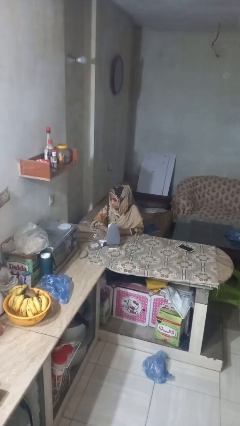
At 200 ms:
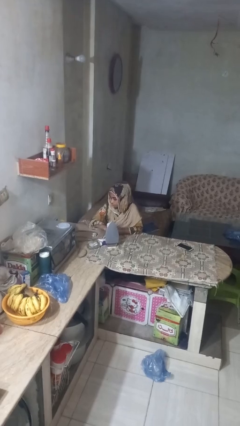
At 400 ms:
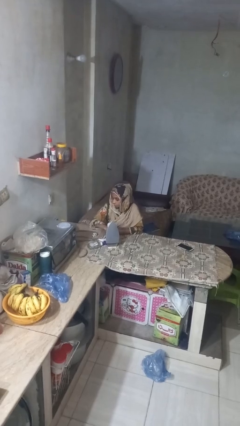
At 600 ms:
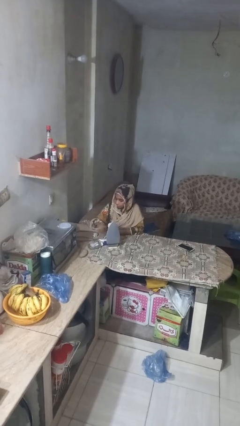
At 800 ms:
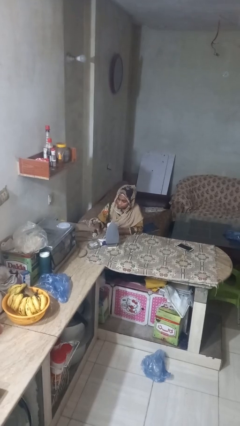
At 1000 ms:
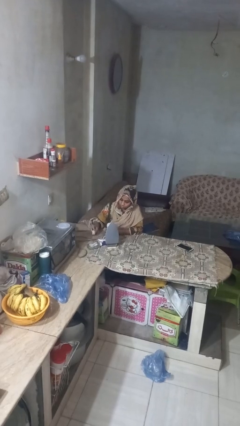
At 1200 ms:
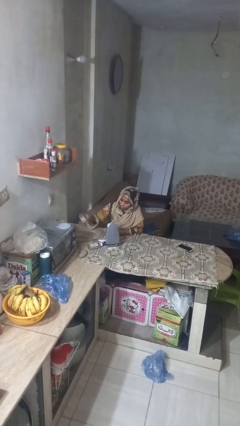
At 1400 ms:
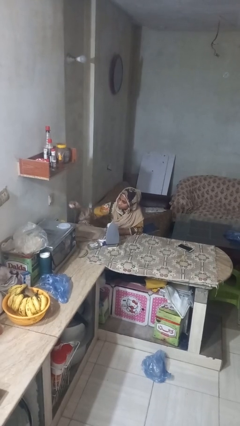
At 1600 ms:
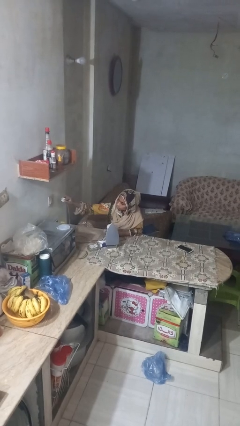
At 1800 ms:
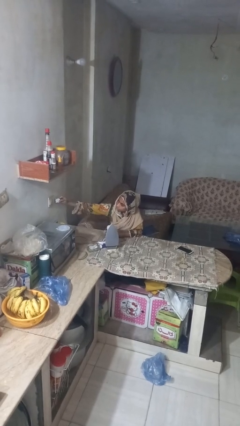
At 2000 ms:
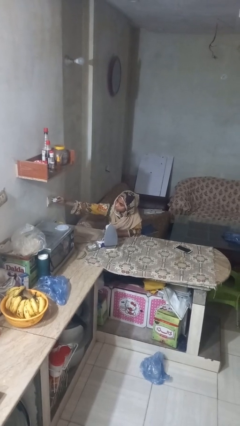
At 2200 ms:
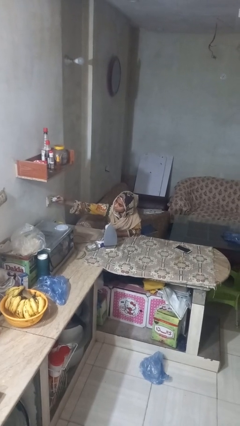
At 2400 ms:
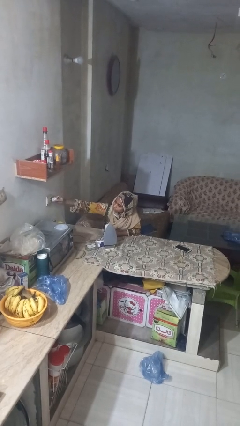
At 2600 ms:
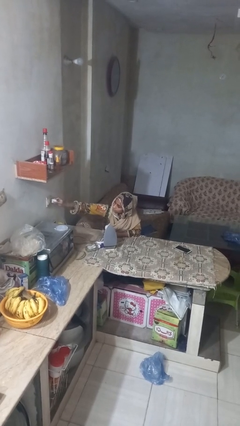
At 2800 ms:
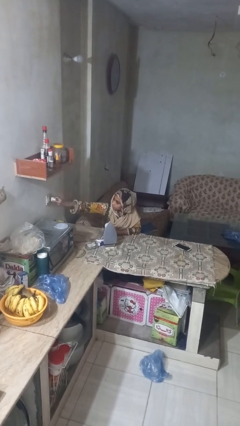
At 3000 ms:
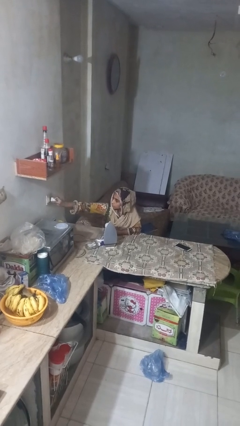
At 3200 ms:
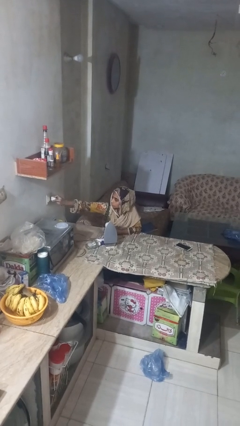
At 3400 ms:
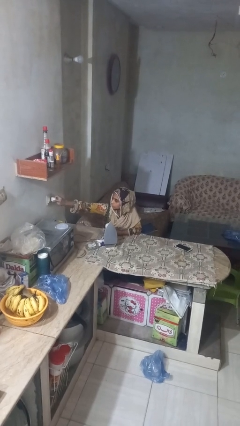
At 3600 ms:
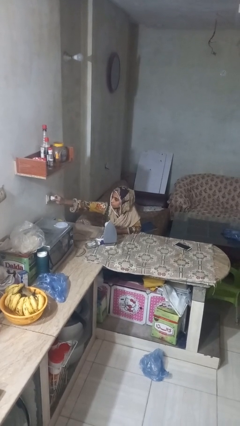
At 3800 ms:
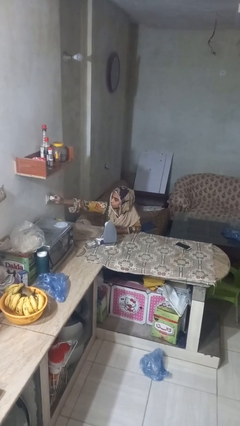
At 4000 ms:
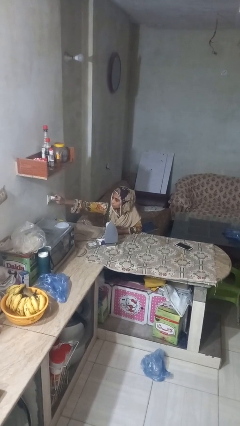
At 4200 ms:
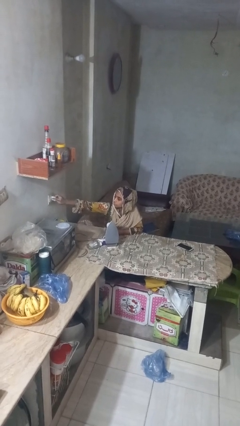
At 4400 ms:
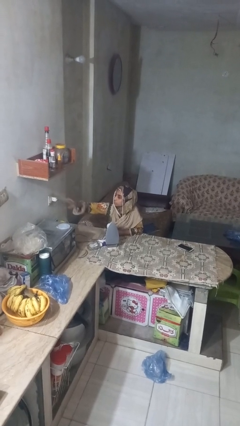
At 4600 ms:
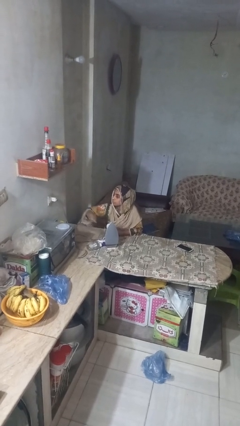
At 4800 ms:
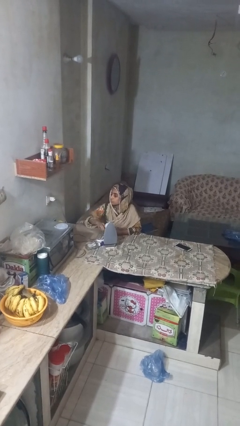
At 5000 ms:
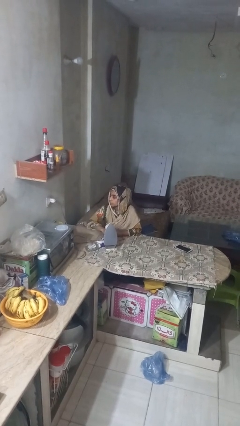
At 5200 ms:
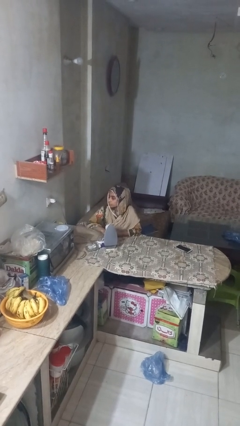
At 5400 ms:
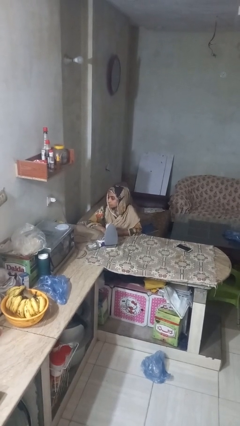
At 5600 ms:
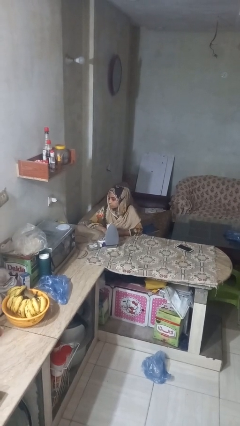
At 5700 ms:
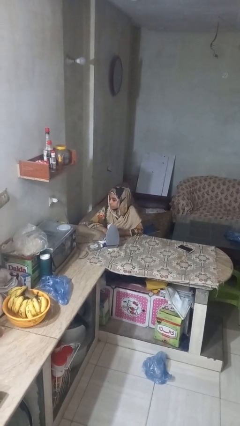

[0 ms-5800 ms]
person plugs into electrical socket

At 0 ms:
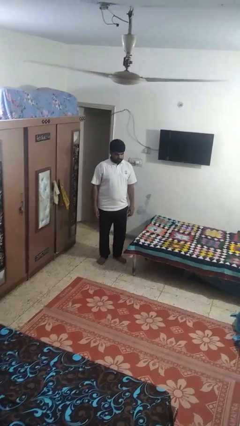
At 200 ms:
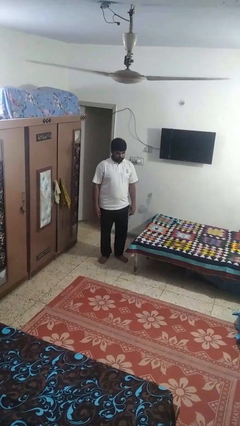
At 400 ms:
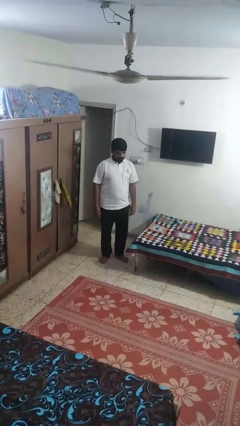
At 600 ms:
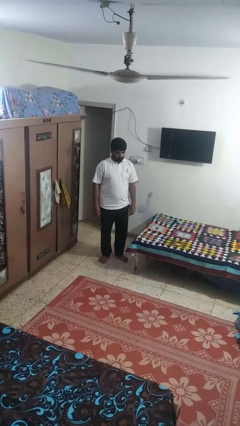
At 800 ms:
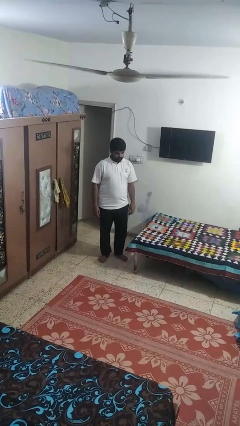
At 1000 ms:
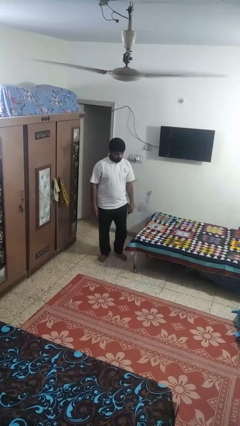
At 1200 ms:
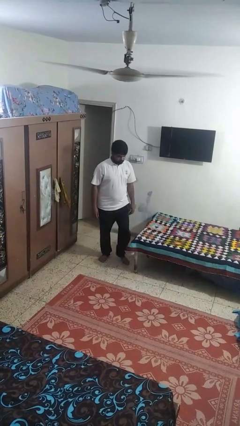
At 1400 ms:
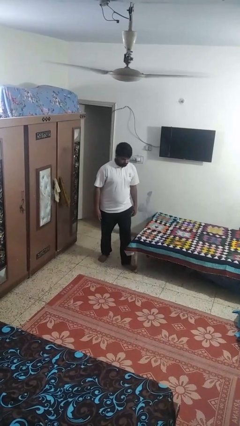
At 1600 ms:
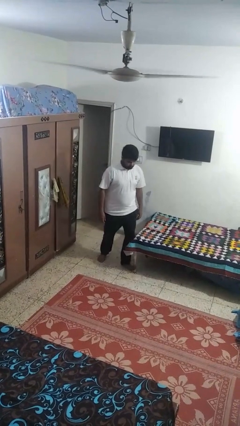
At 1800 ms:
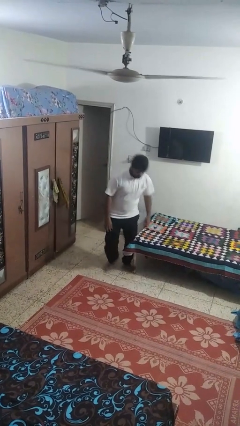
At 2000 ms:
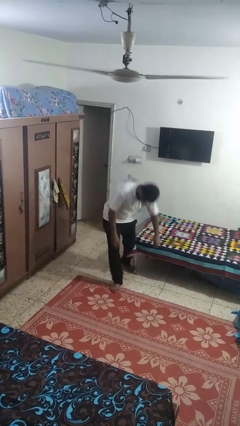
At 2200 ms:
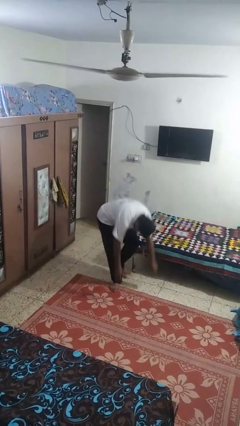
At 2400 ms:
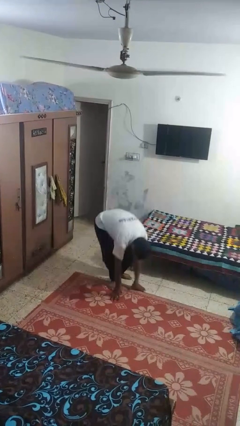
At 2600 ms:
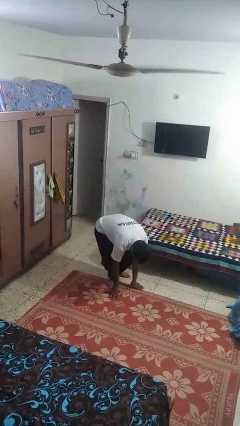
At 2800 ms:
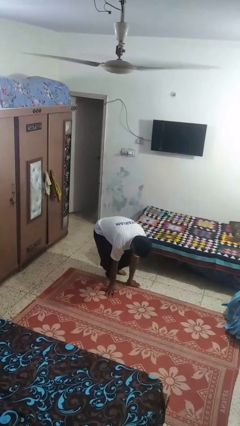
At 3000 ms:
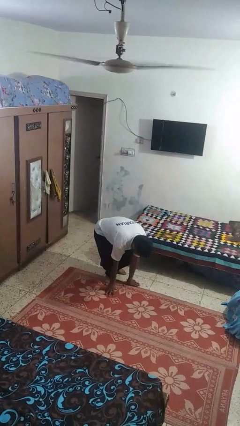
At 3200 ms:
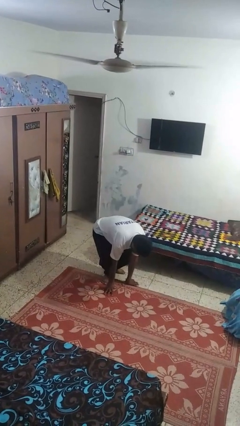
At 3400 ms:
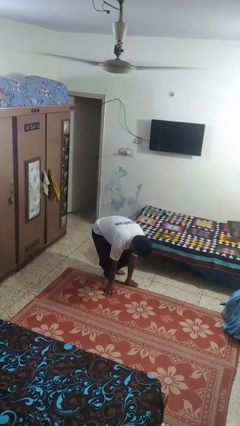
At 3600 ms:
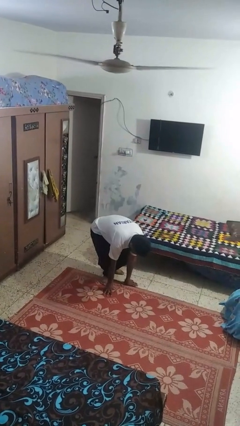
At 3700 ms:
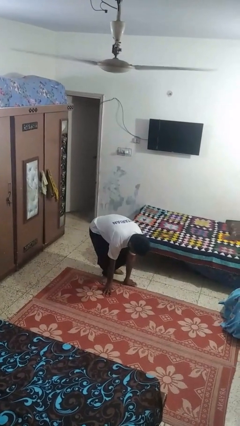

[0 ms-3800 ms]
person trips on object on floor

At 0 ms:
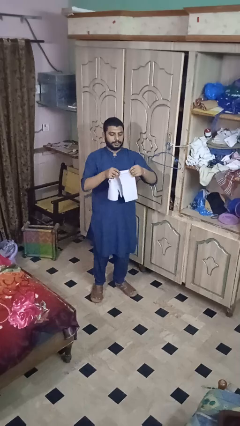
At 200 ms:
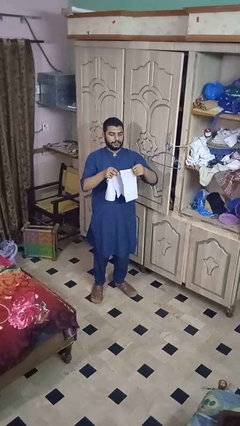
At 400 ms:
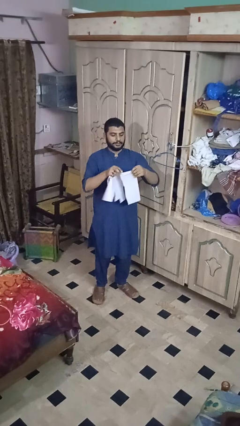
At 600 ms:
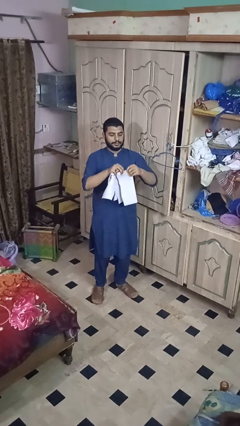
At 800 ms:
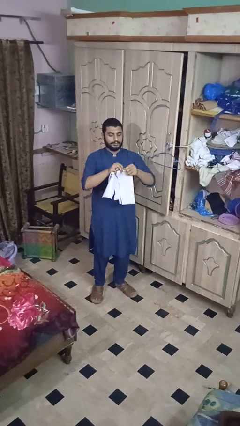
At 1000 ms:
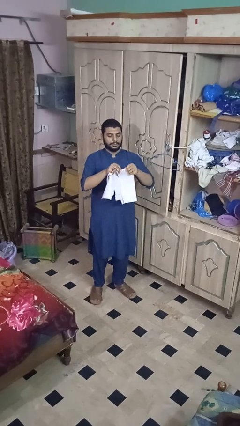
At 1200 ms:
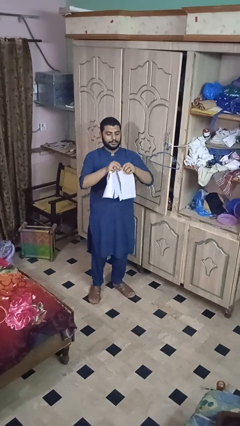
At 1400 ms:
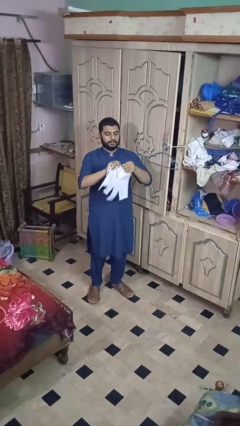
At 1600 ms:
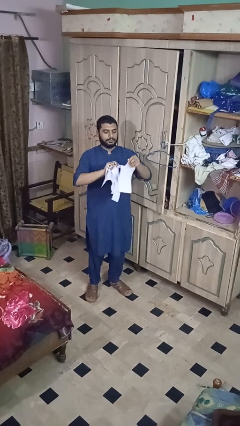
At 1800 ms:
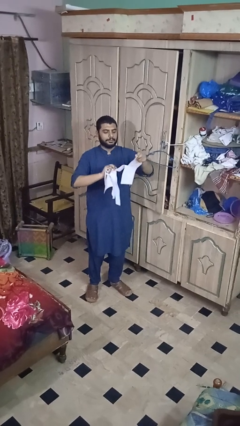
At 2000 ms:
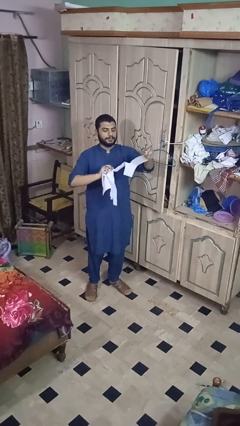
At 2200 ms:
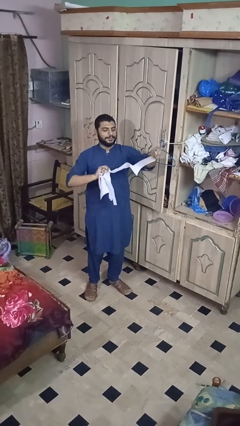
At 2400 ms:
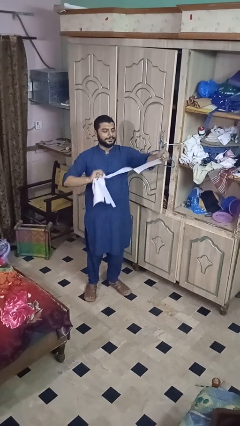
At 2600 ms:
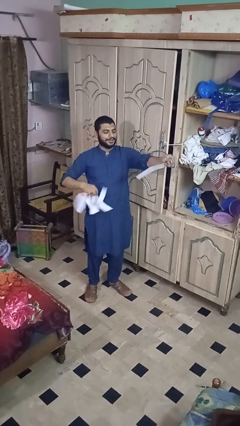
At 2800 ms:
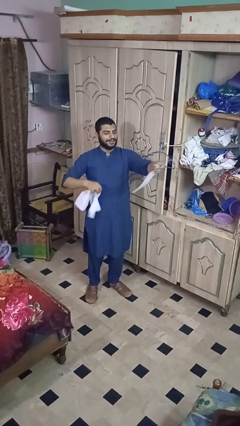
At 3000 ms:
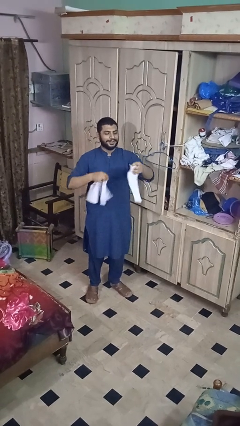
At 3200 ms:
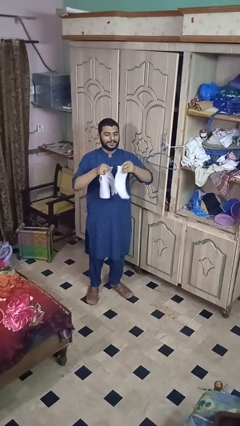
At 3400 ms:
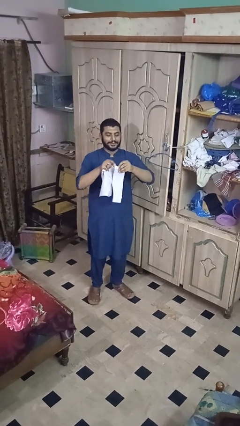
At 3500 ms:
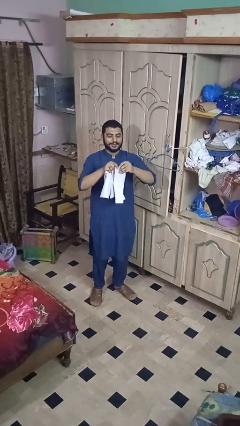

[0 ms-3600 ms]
person tears paper

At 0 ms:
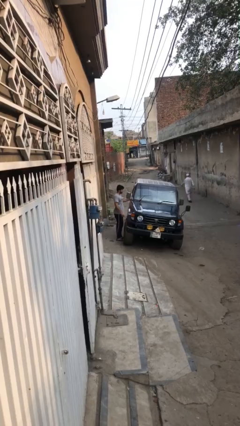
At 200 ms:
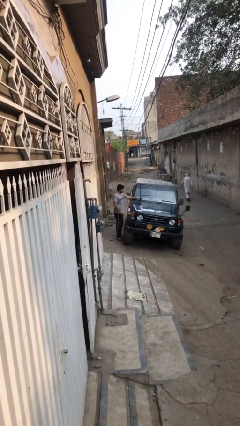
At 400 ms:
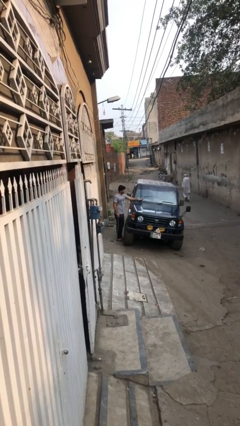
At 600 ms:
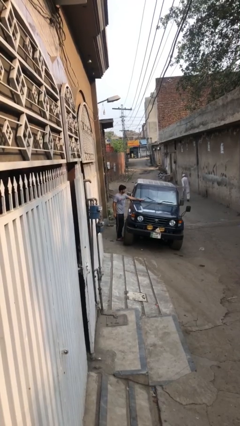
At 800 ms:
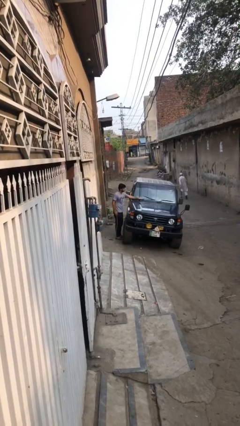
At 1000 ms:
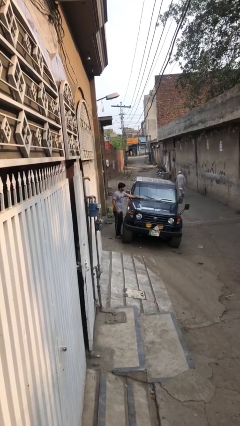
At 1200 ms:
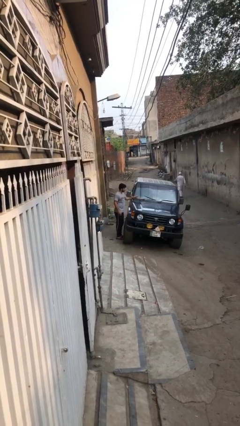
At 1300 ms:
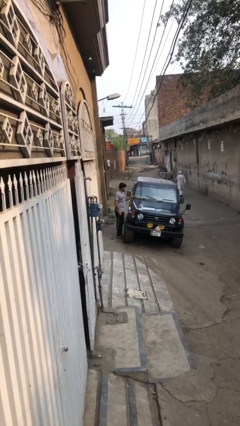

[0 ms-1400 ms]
person flips down car wipers

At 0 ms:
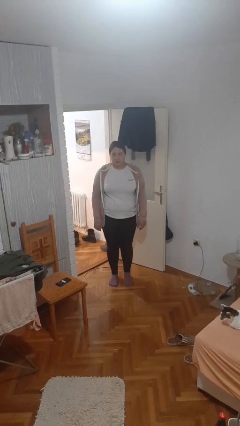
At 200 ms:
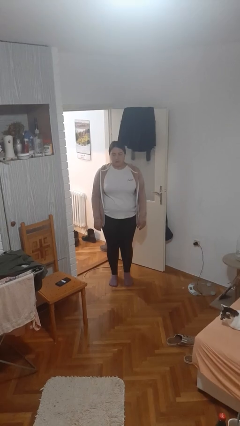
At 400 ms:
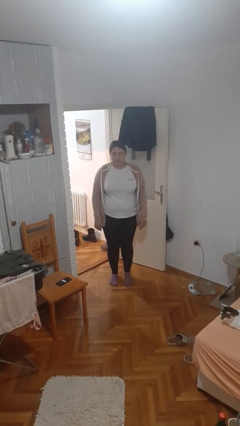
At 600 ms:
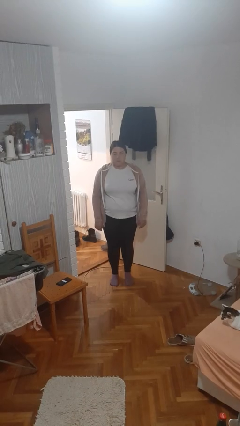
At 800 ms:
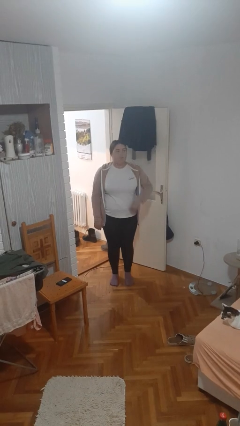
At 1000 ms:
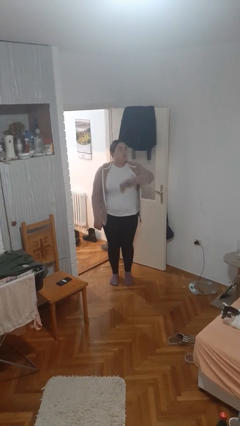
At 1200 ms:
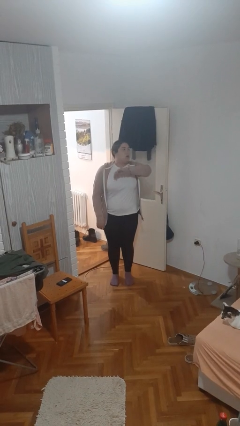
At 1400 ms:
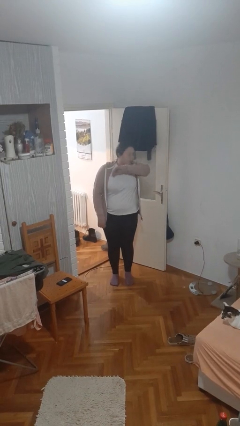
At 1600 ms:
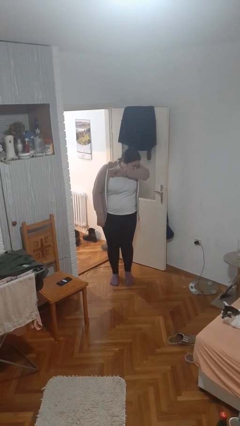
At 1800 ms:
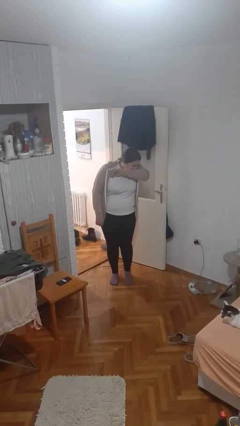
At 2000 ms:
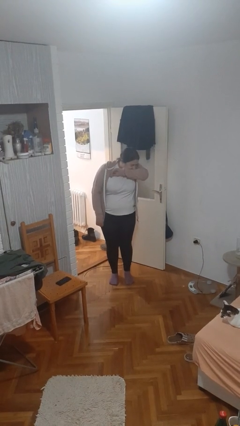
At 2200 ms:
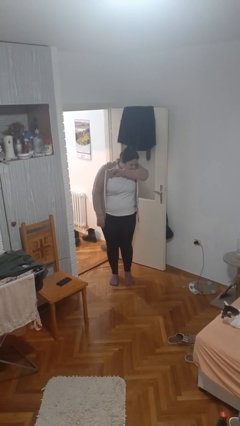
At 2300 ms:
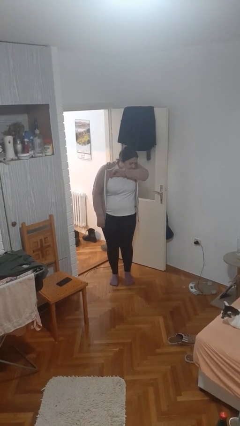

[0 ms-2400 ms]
person sneezes into arm

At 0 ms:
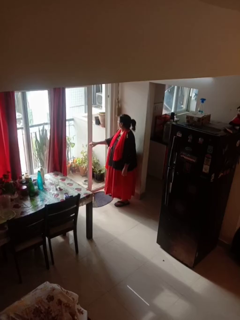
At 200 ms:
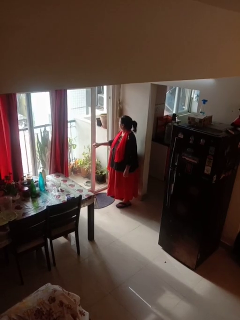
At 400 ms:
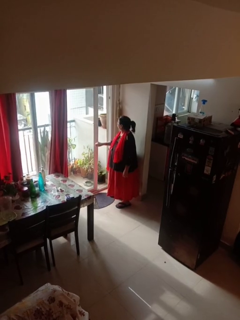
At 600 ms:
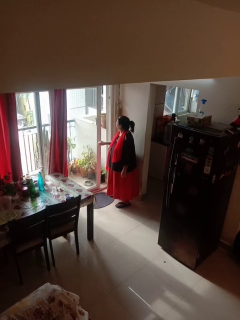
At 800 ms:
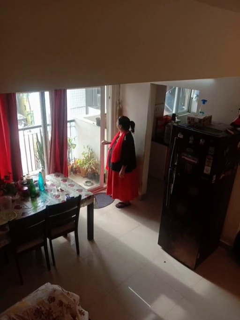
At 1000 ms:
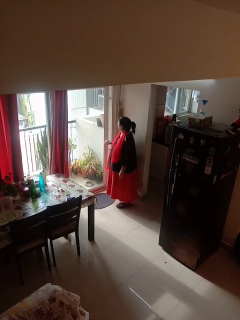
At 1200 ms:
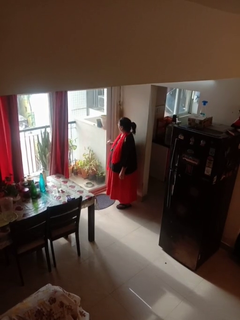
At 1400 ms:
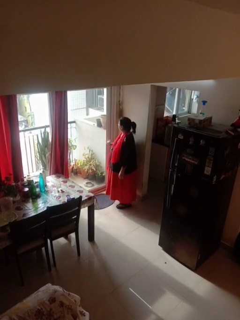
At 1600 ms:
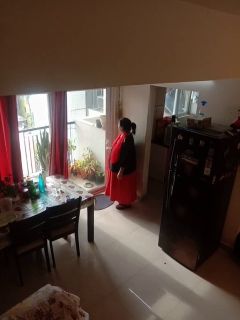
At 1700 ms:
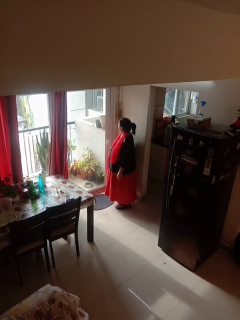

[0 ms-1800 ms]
person closes home window
